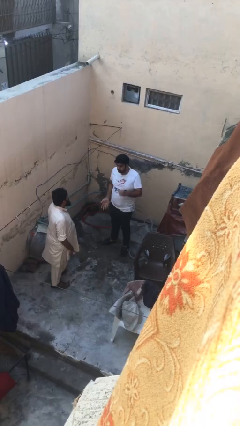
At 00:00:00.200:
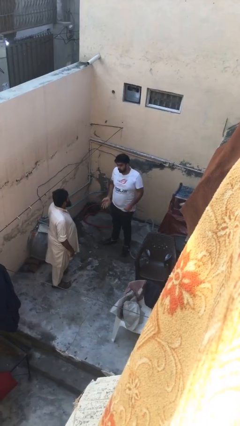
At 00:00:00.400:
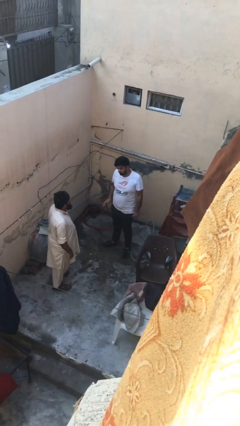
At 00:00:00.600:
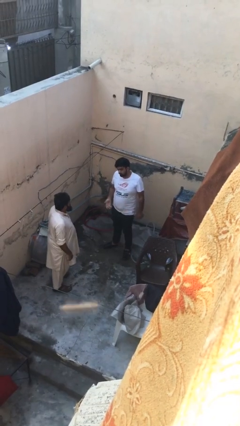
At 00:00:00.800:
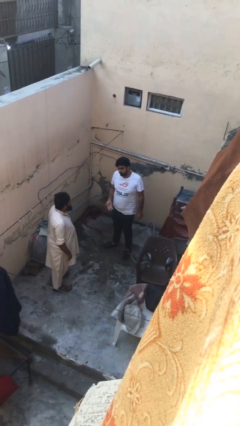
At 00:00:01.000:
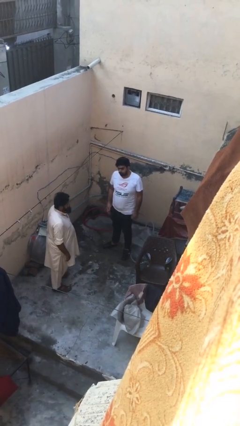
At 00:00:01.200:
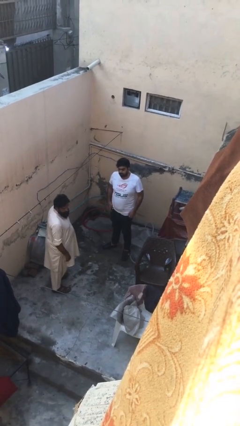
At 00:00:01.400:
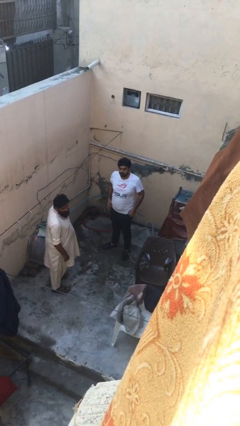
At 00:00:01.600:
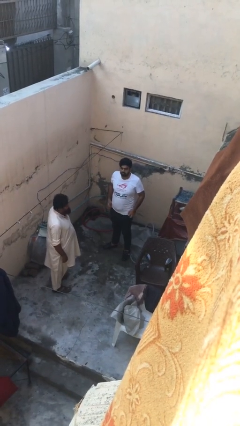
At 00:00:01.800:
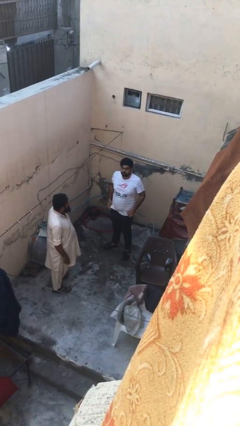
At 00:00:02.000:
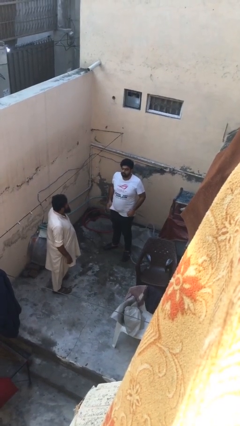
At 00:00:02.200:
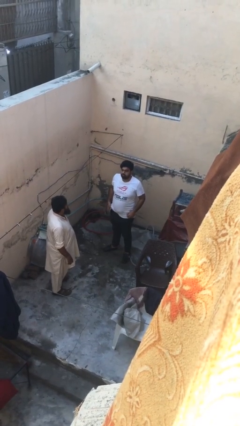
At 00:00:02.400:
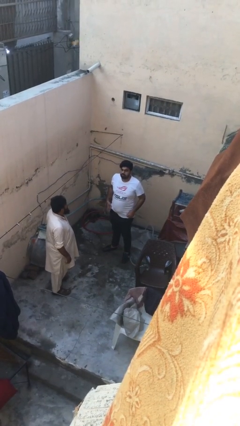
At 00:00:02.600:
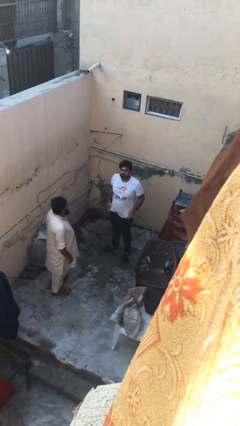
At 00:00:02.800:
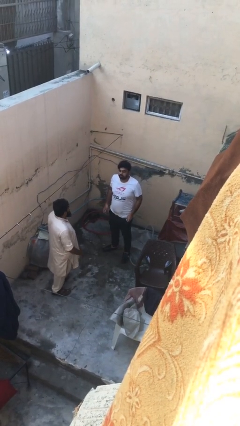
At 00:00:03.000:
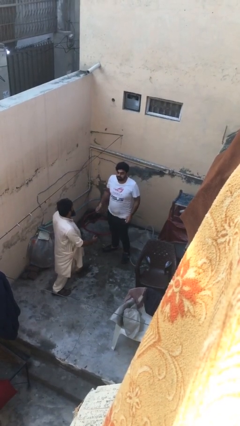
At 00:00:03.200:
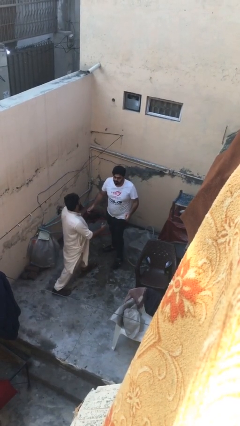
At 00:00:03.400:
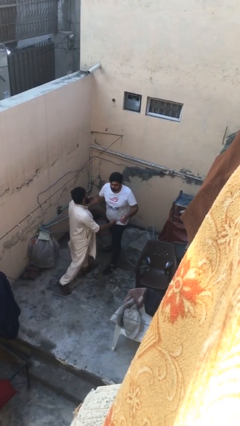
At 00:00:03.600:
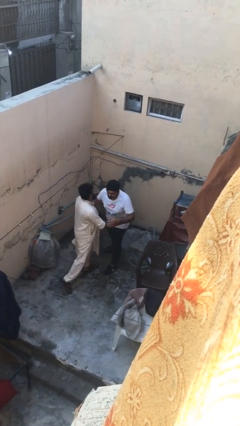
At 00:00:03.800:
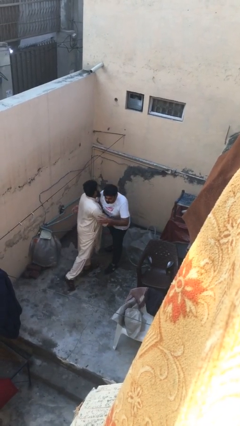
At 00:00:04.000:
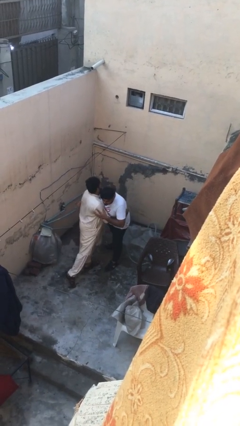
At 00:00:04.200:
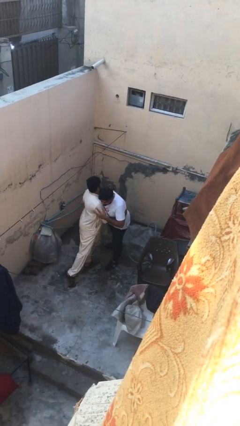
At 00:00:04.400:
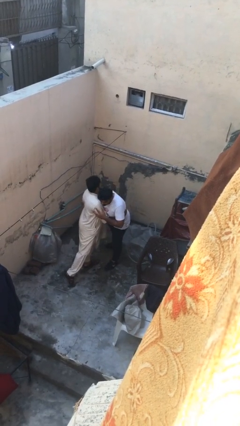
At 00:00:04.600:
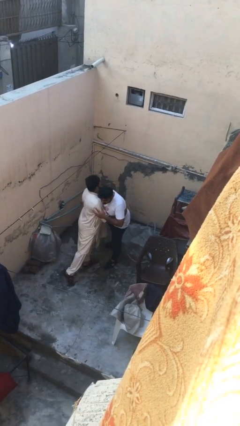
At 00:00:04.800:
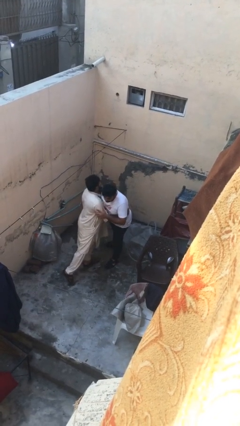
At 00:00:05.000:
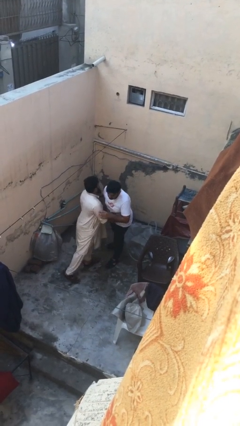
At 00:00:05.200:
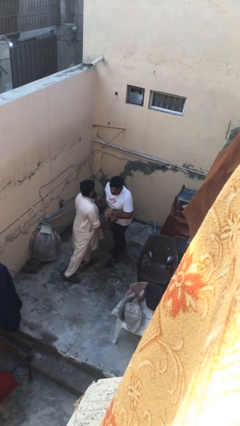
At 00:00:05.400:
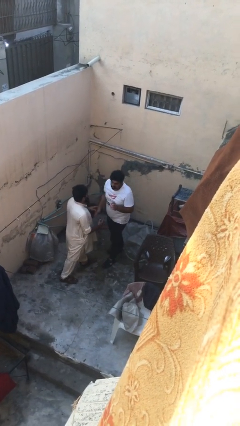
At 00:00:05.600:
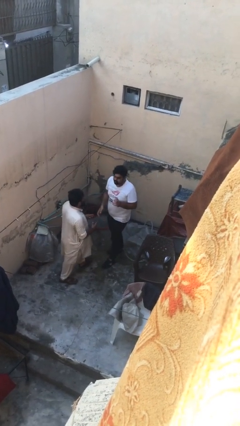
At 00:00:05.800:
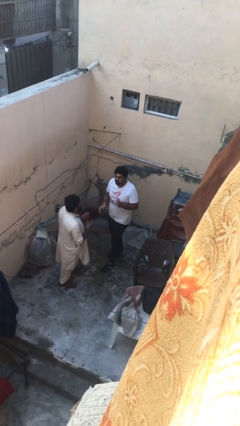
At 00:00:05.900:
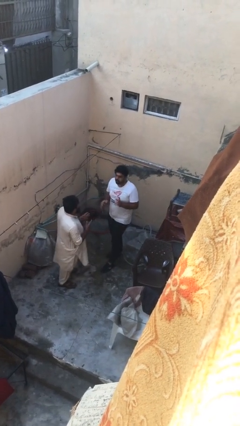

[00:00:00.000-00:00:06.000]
person embraces person

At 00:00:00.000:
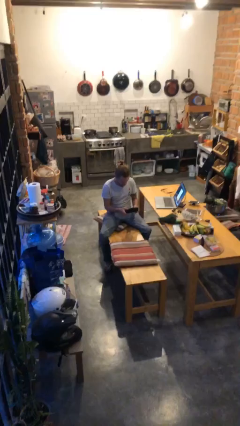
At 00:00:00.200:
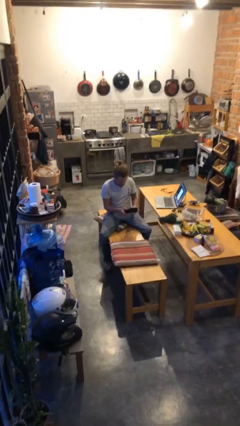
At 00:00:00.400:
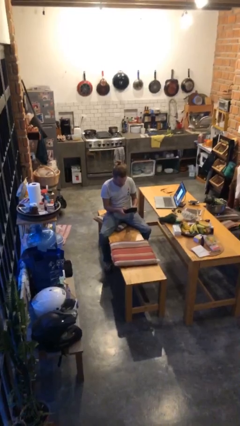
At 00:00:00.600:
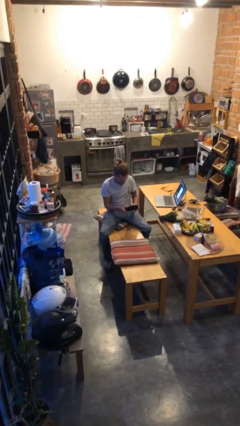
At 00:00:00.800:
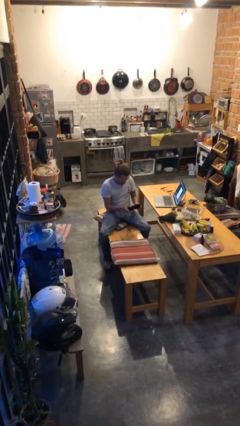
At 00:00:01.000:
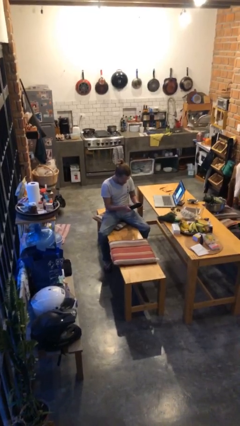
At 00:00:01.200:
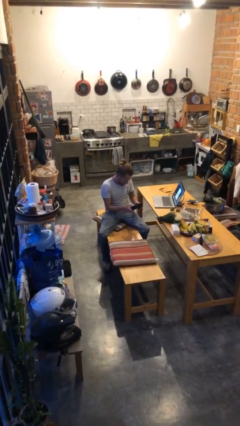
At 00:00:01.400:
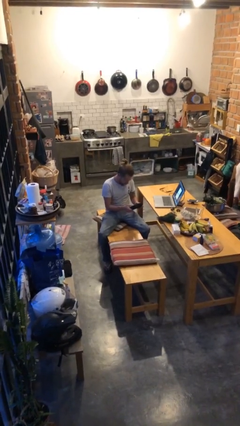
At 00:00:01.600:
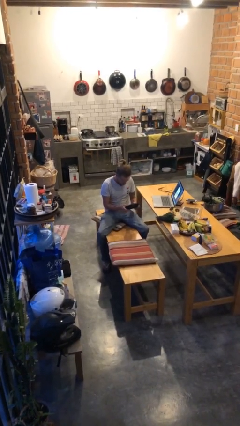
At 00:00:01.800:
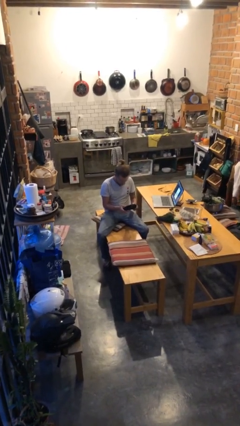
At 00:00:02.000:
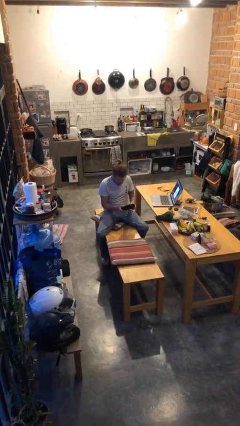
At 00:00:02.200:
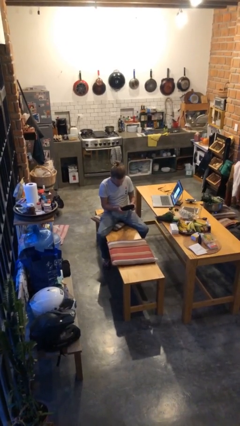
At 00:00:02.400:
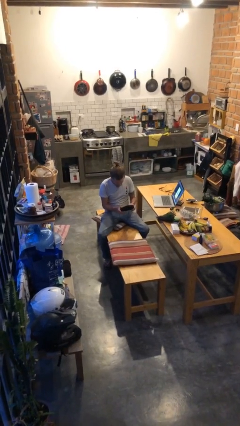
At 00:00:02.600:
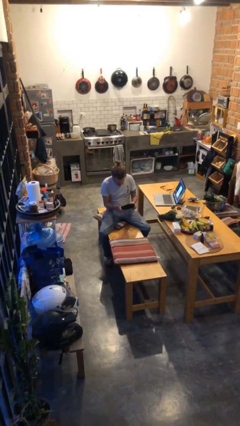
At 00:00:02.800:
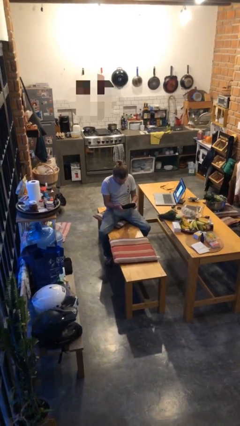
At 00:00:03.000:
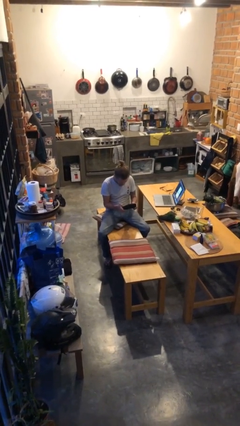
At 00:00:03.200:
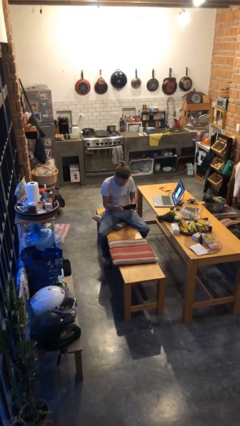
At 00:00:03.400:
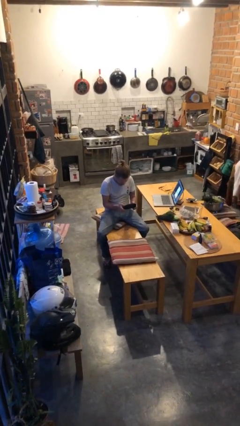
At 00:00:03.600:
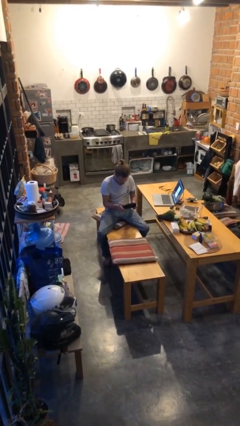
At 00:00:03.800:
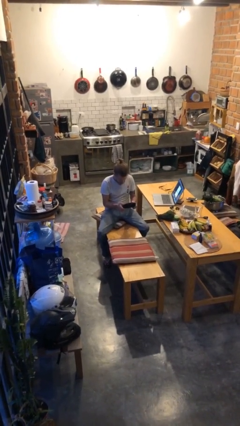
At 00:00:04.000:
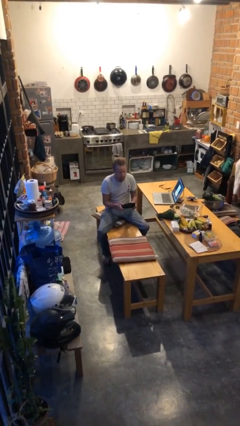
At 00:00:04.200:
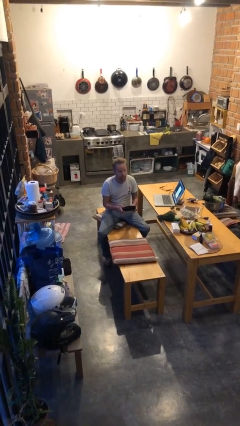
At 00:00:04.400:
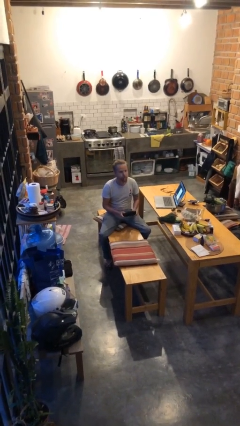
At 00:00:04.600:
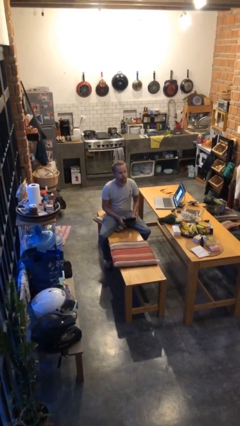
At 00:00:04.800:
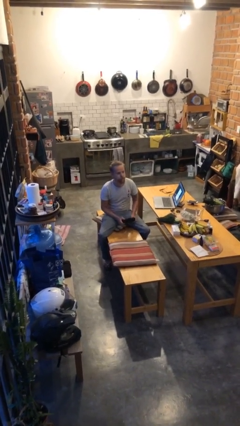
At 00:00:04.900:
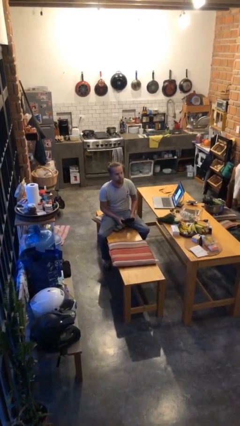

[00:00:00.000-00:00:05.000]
person interacts with handheld game

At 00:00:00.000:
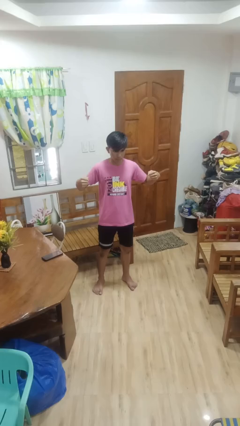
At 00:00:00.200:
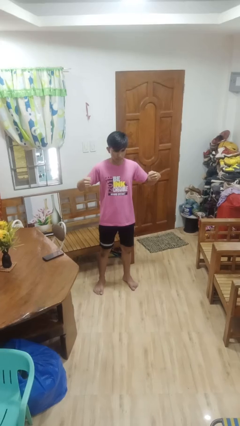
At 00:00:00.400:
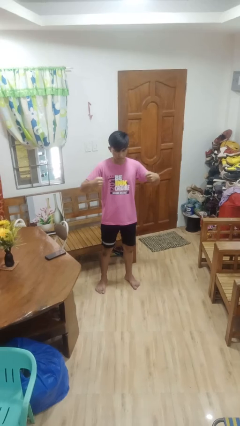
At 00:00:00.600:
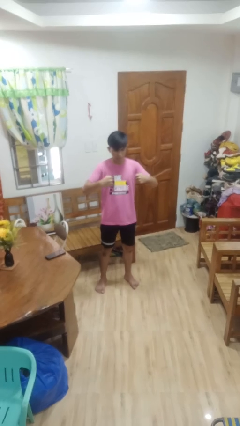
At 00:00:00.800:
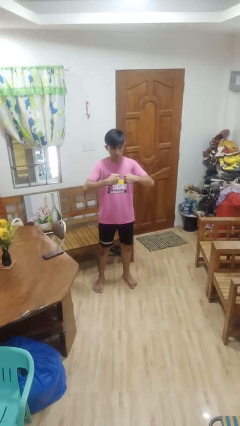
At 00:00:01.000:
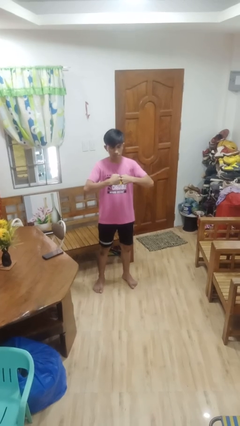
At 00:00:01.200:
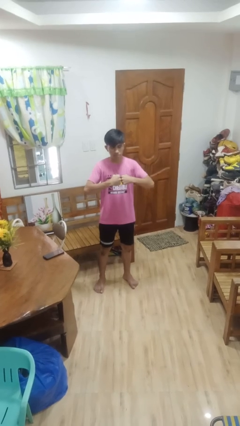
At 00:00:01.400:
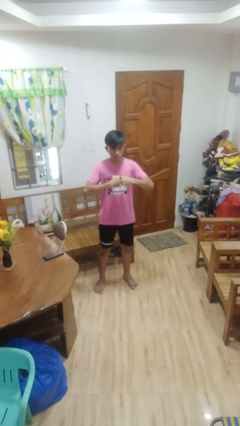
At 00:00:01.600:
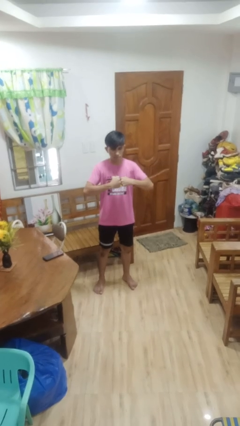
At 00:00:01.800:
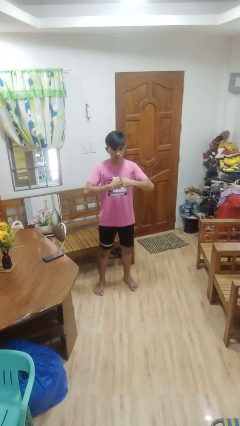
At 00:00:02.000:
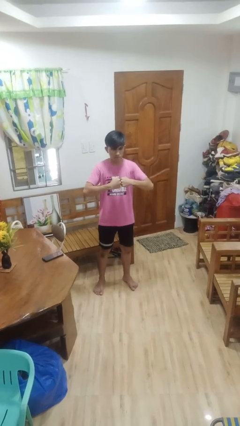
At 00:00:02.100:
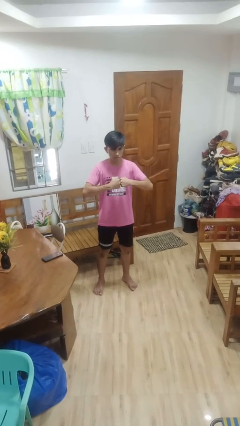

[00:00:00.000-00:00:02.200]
person gestures zoom out

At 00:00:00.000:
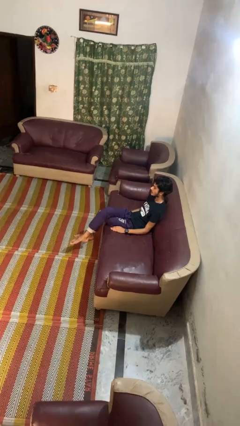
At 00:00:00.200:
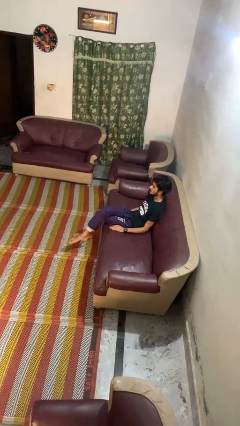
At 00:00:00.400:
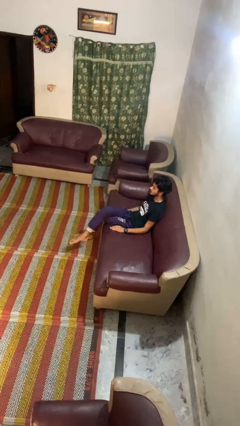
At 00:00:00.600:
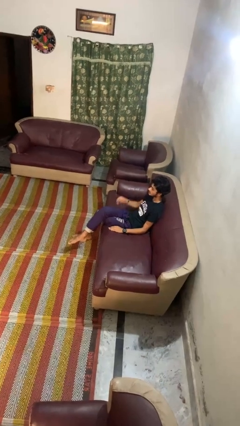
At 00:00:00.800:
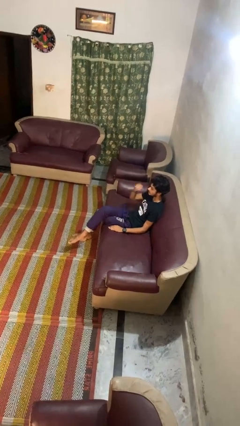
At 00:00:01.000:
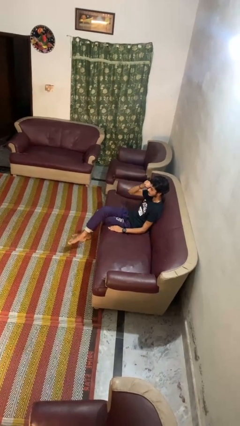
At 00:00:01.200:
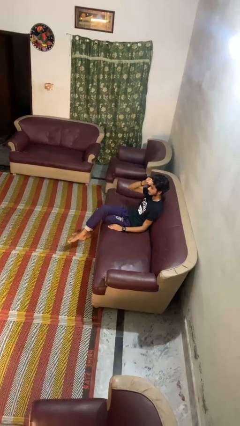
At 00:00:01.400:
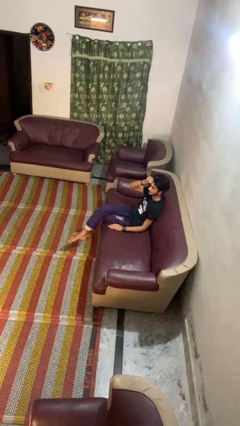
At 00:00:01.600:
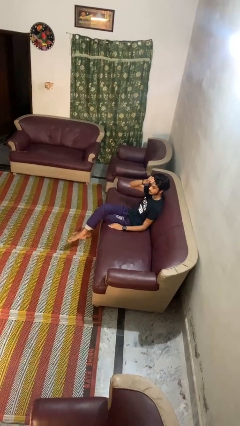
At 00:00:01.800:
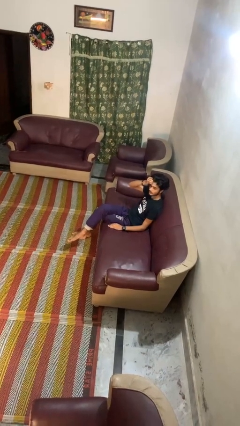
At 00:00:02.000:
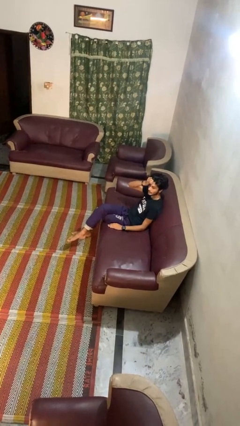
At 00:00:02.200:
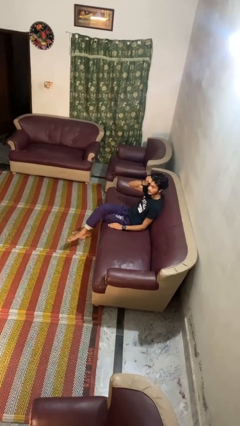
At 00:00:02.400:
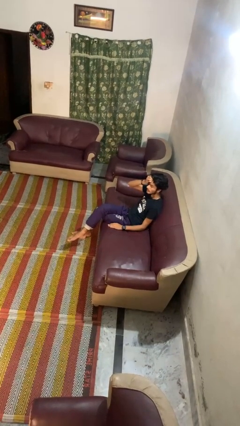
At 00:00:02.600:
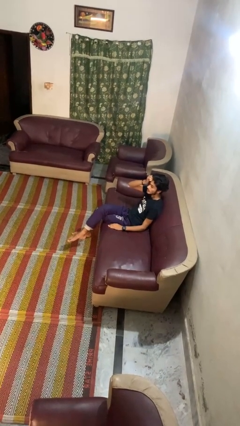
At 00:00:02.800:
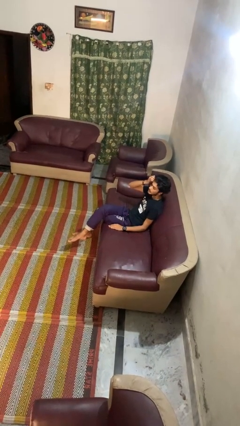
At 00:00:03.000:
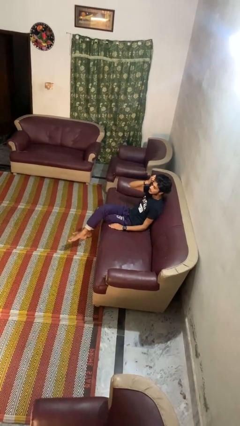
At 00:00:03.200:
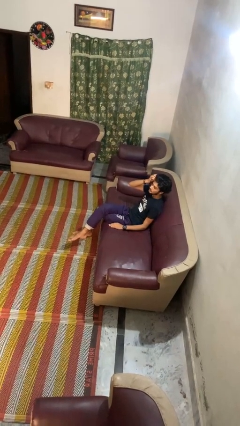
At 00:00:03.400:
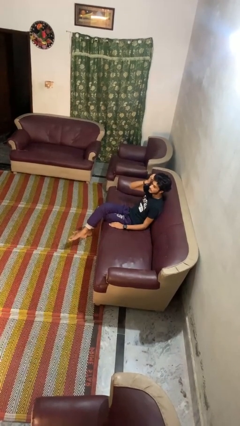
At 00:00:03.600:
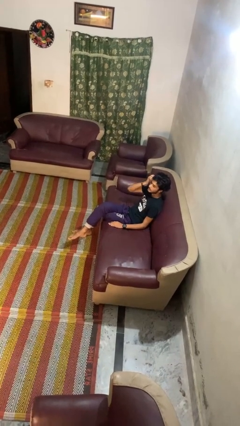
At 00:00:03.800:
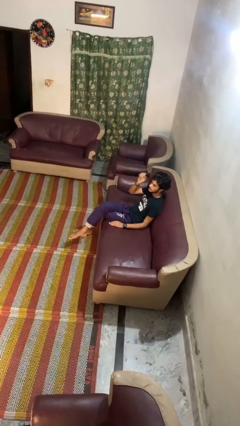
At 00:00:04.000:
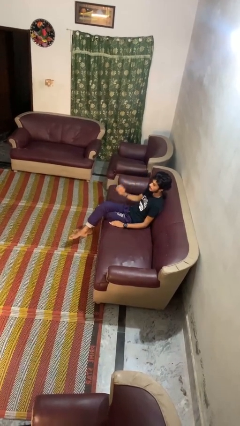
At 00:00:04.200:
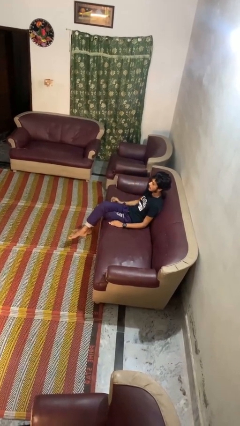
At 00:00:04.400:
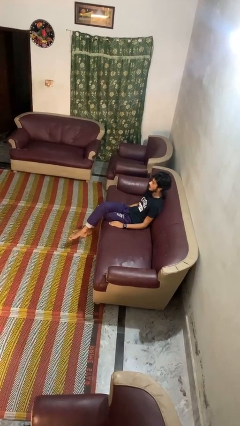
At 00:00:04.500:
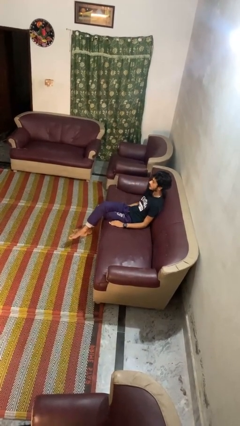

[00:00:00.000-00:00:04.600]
person scratches face
